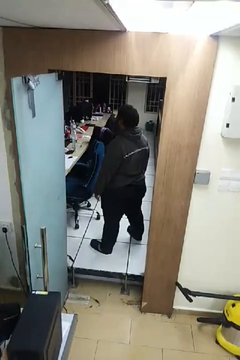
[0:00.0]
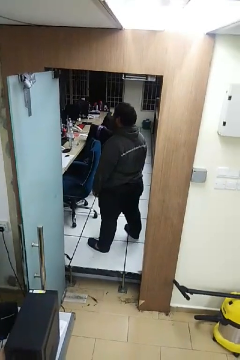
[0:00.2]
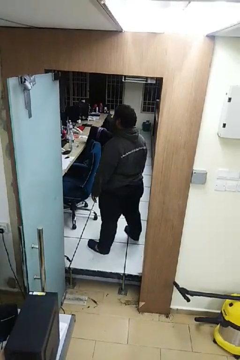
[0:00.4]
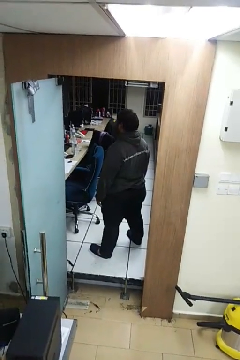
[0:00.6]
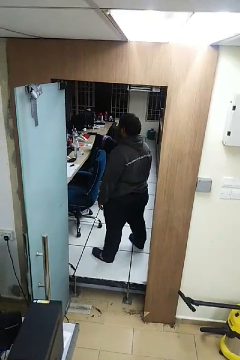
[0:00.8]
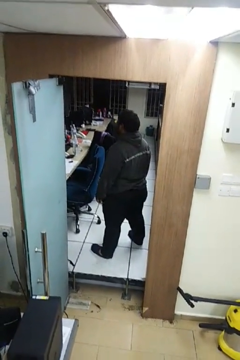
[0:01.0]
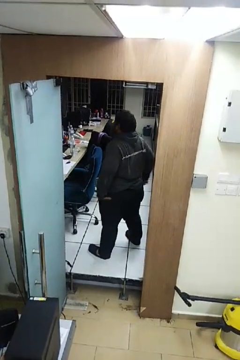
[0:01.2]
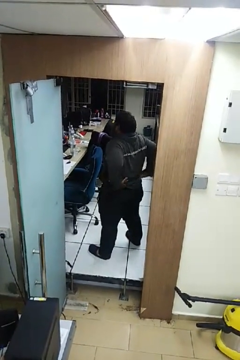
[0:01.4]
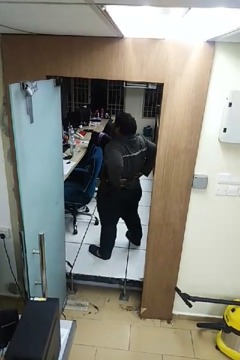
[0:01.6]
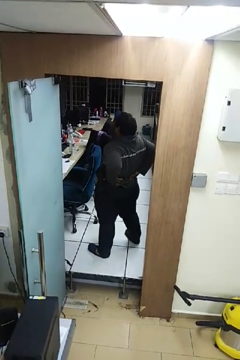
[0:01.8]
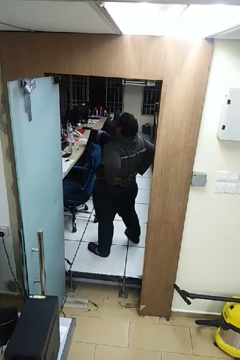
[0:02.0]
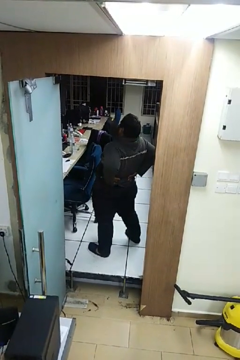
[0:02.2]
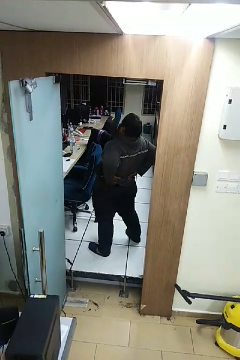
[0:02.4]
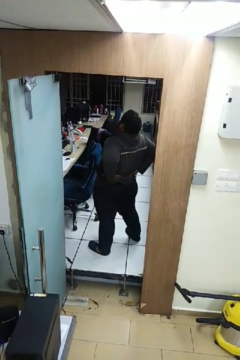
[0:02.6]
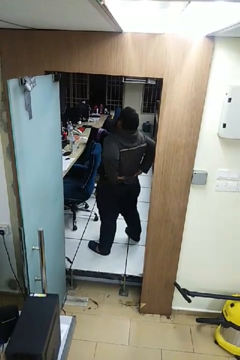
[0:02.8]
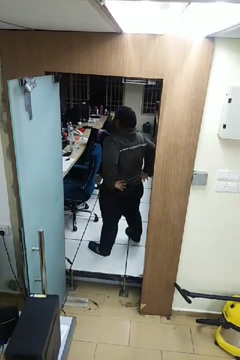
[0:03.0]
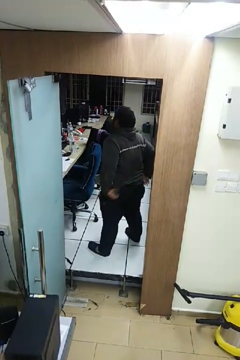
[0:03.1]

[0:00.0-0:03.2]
person stretches back

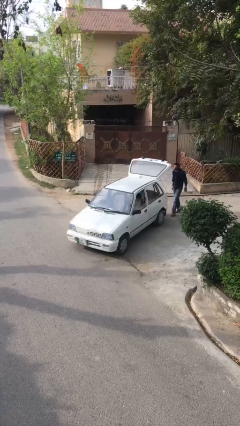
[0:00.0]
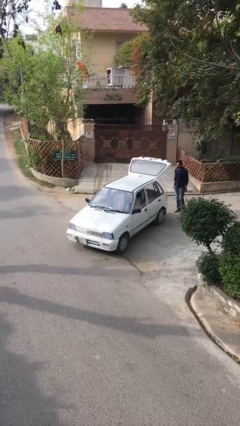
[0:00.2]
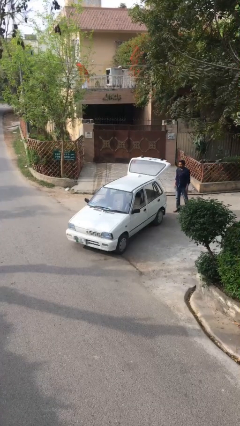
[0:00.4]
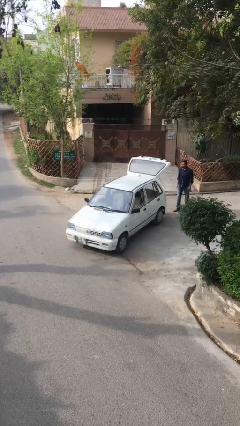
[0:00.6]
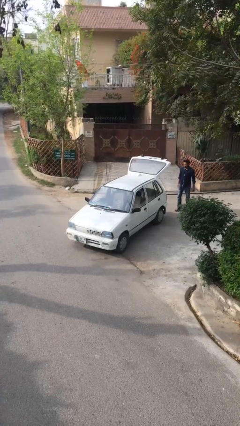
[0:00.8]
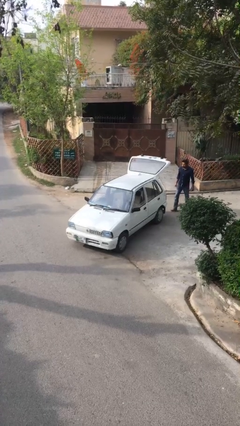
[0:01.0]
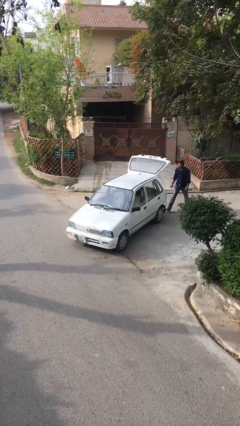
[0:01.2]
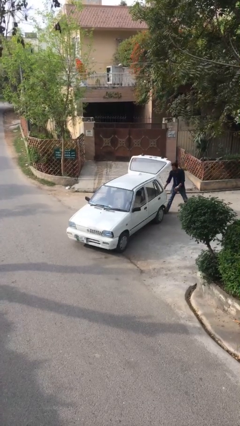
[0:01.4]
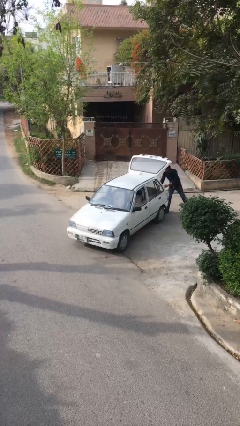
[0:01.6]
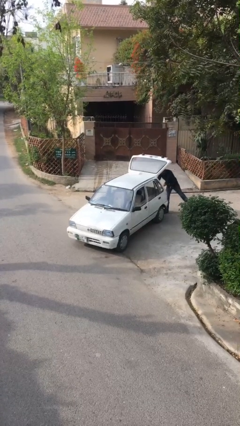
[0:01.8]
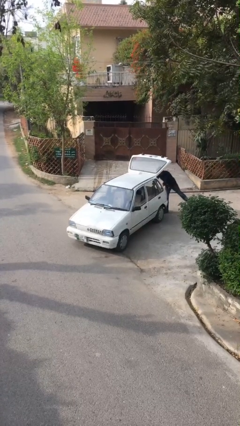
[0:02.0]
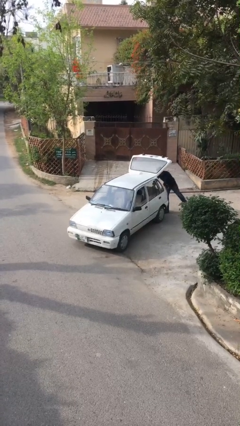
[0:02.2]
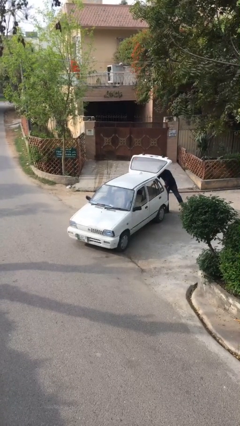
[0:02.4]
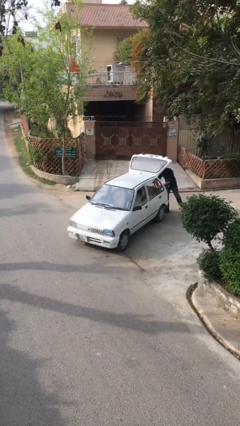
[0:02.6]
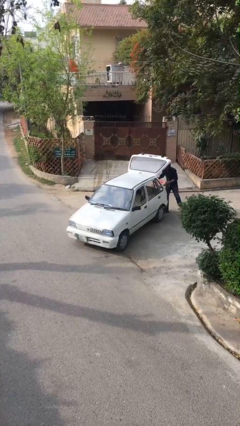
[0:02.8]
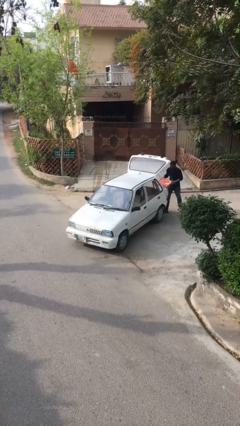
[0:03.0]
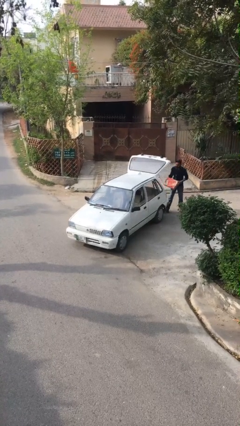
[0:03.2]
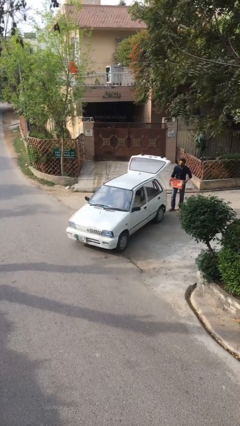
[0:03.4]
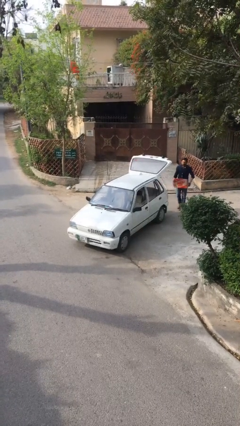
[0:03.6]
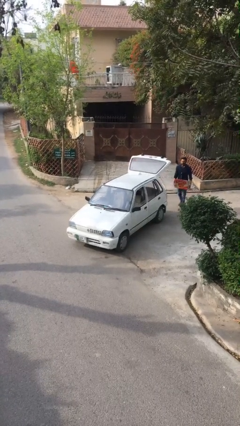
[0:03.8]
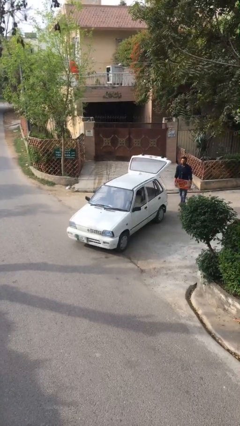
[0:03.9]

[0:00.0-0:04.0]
person unloads car

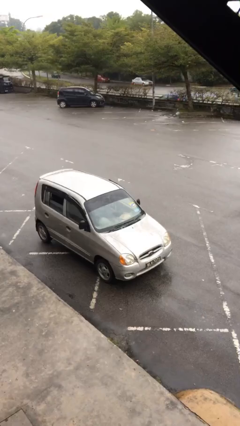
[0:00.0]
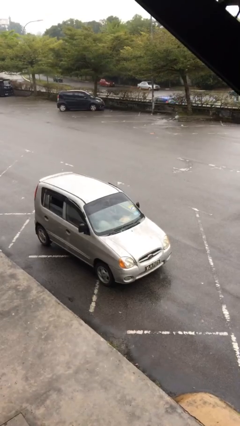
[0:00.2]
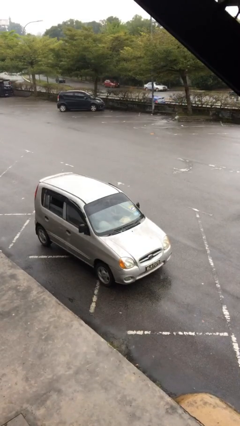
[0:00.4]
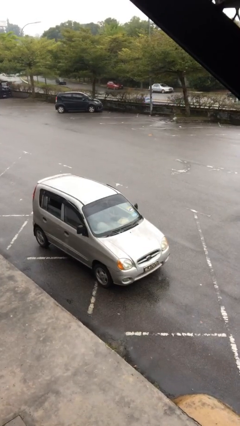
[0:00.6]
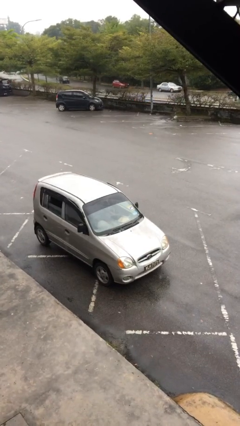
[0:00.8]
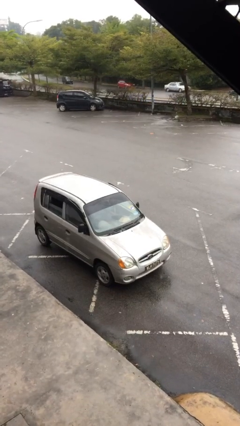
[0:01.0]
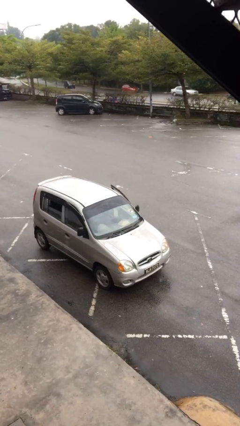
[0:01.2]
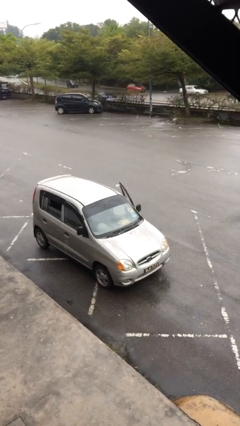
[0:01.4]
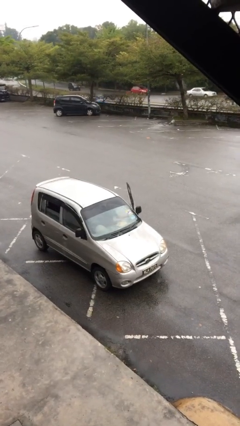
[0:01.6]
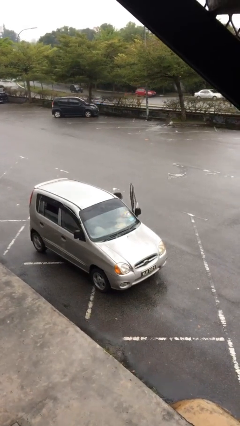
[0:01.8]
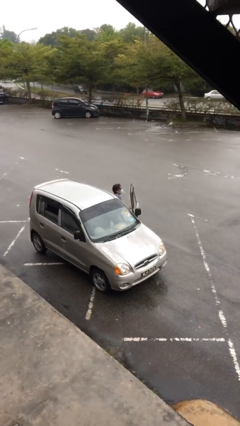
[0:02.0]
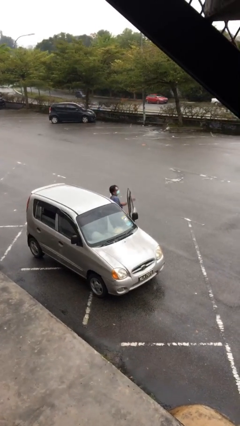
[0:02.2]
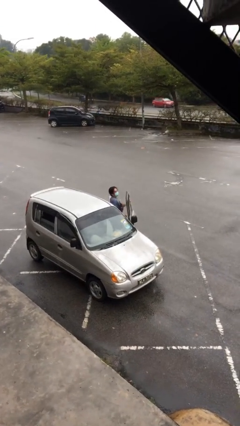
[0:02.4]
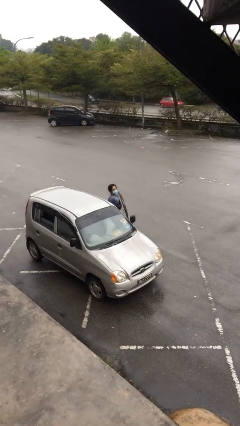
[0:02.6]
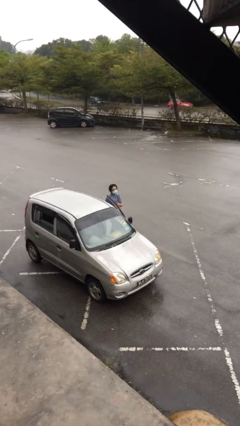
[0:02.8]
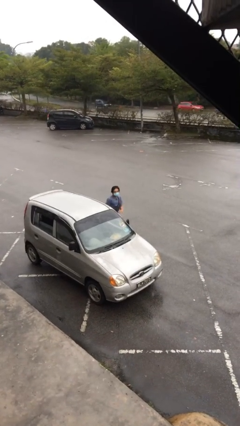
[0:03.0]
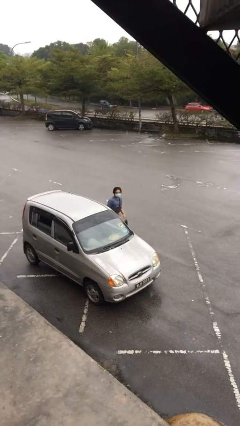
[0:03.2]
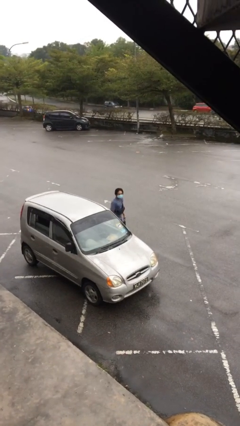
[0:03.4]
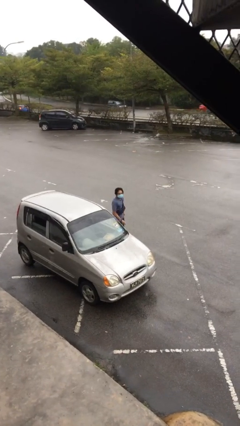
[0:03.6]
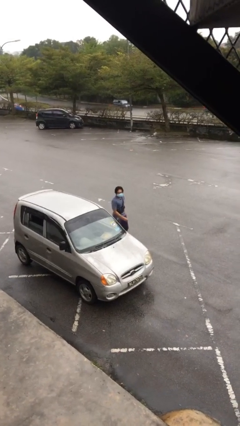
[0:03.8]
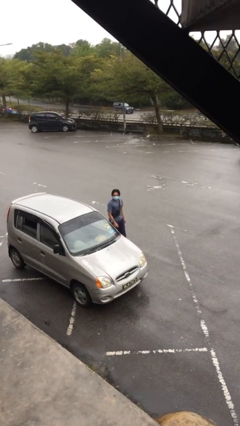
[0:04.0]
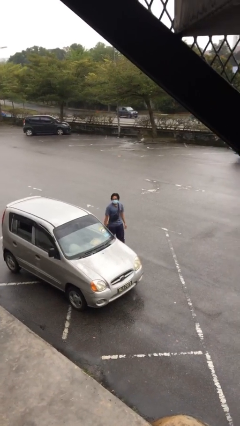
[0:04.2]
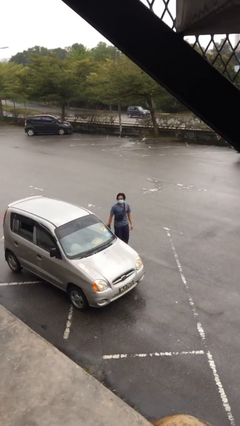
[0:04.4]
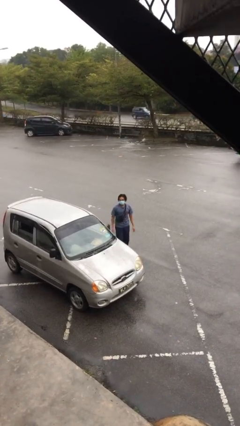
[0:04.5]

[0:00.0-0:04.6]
person exits car

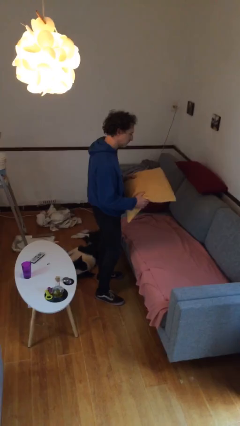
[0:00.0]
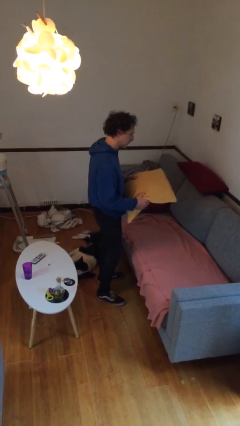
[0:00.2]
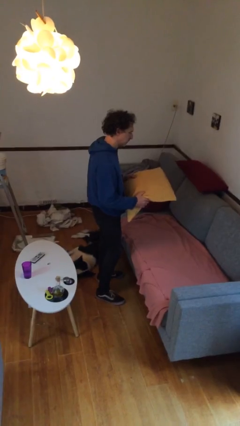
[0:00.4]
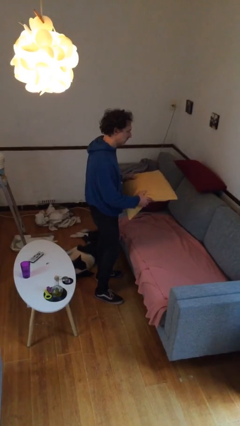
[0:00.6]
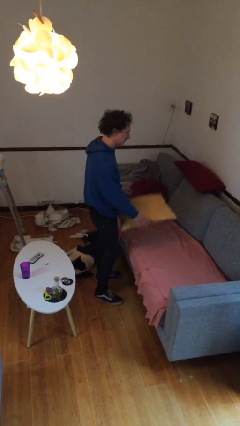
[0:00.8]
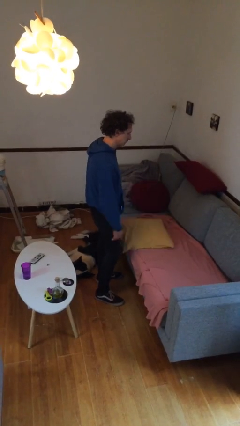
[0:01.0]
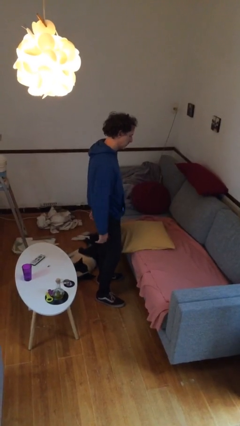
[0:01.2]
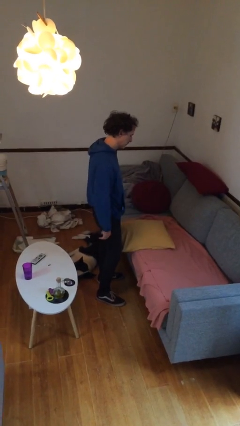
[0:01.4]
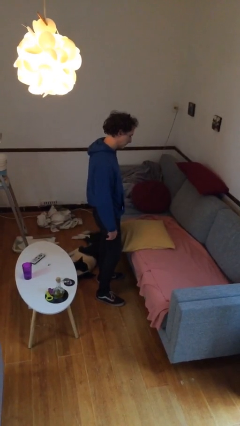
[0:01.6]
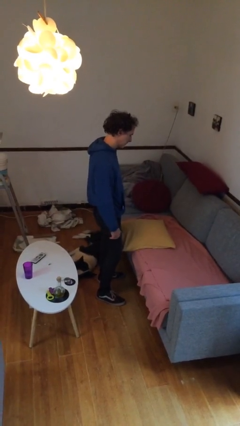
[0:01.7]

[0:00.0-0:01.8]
person puts down object on couch

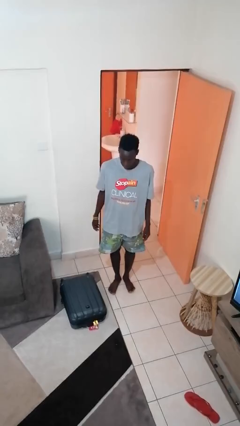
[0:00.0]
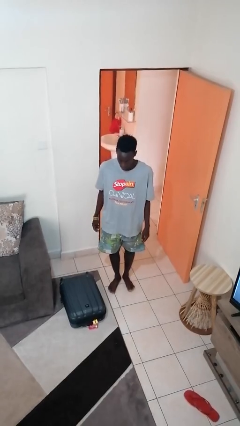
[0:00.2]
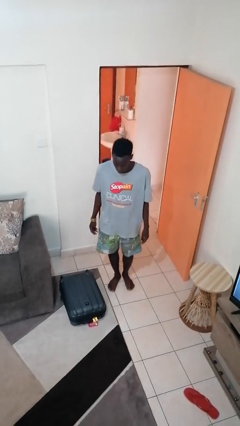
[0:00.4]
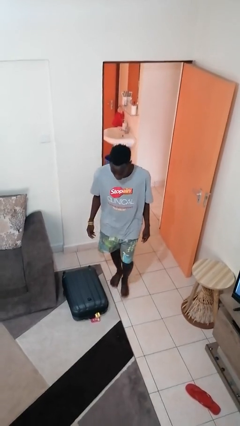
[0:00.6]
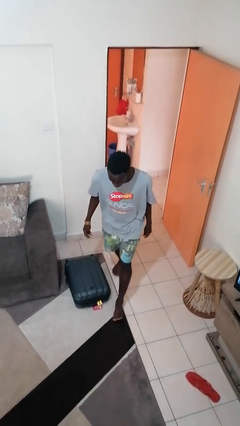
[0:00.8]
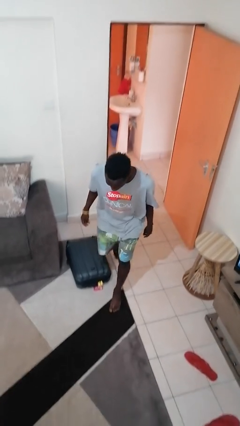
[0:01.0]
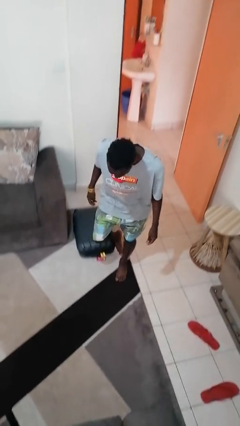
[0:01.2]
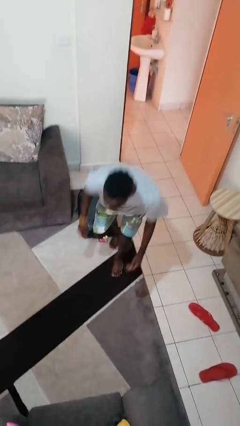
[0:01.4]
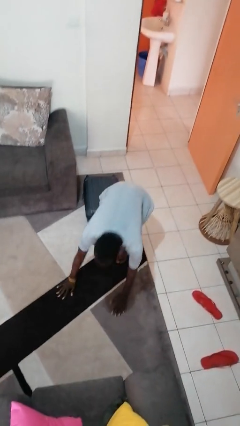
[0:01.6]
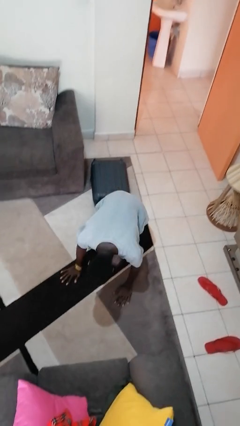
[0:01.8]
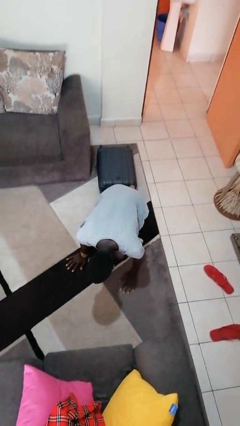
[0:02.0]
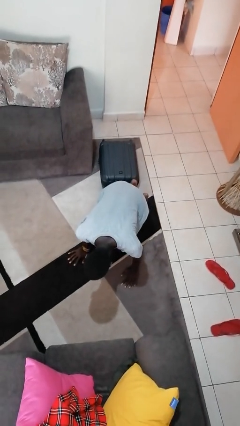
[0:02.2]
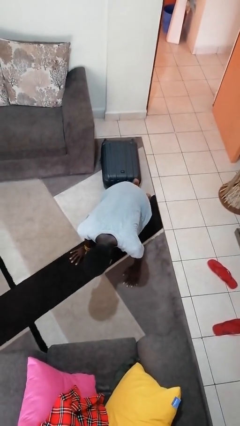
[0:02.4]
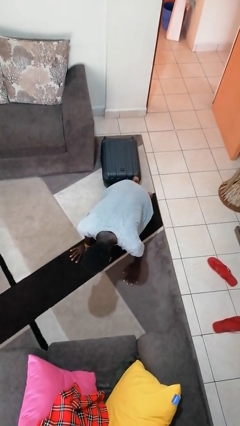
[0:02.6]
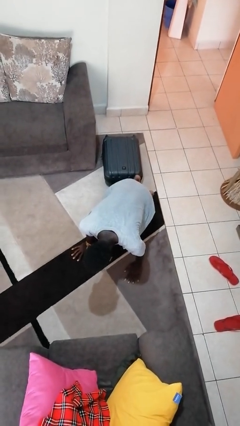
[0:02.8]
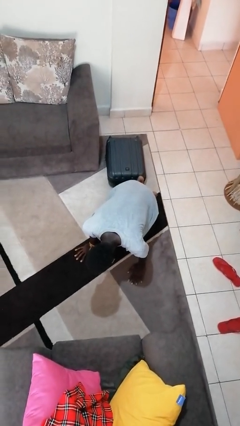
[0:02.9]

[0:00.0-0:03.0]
person trips on object on floor

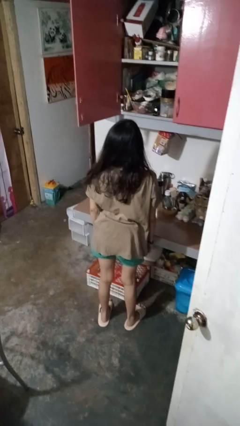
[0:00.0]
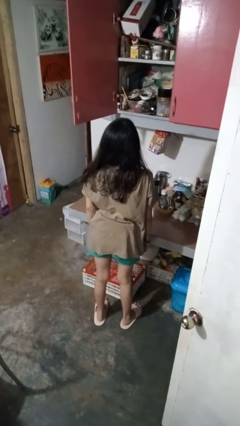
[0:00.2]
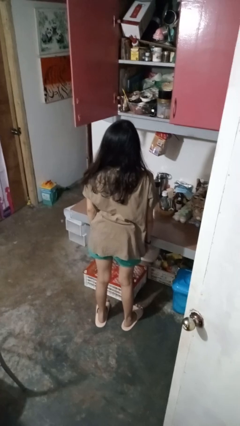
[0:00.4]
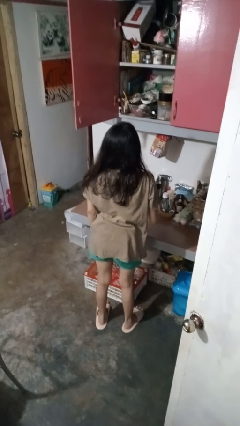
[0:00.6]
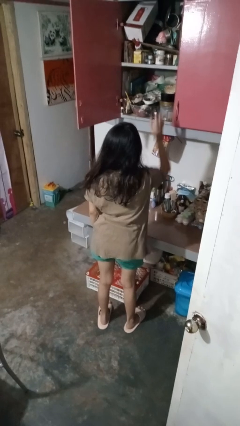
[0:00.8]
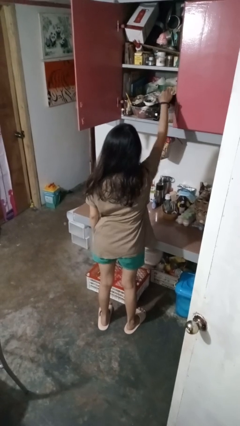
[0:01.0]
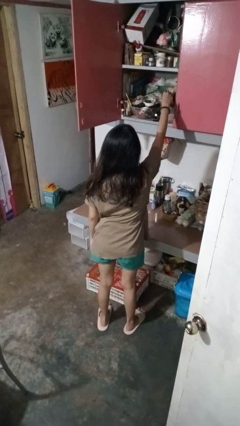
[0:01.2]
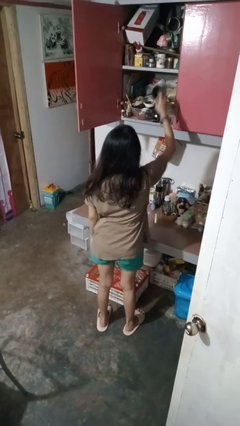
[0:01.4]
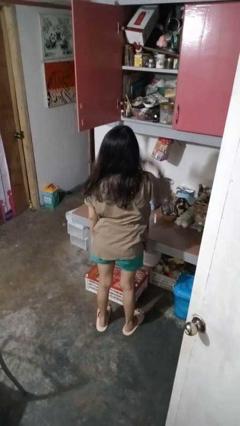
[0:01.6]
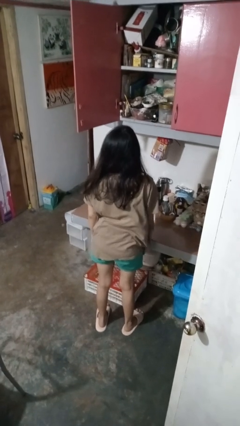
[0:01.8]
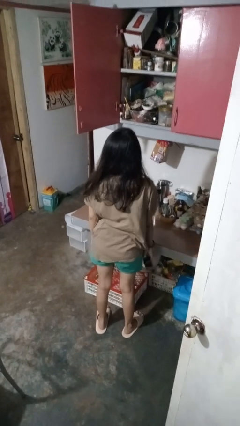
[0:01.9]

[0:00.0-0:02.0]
person takes object from cabinet
